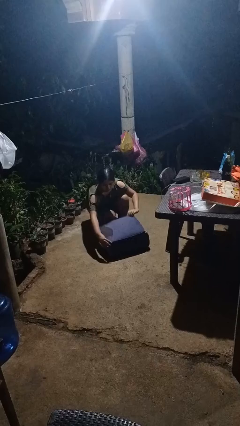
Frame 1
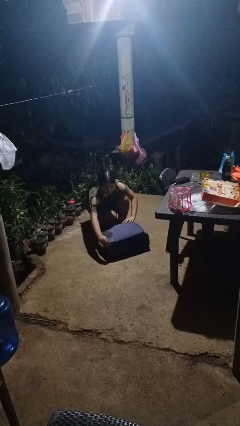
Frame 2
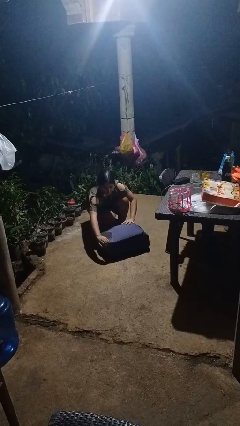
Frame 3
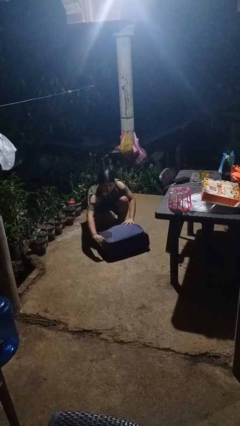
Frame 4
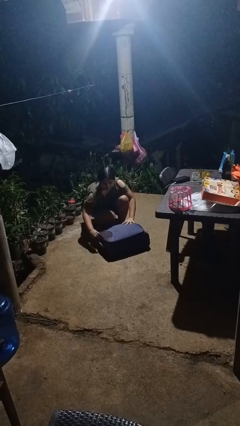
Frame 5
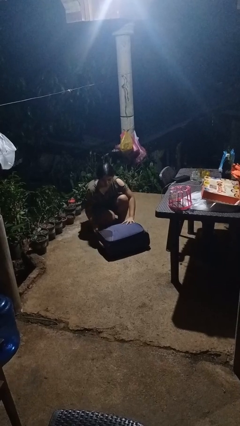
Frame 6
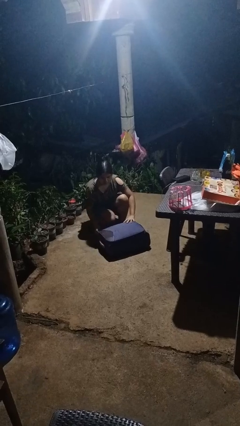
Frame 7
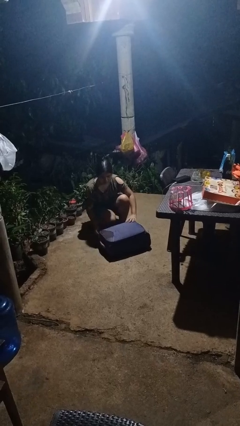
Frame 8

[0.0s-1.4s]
person closes suitcase

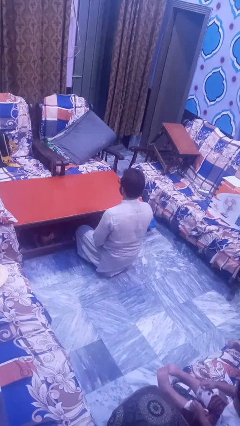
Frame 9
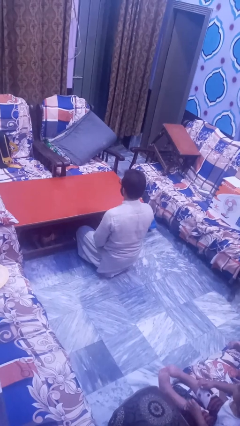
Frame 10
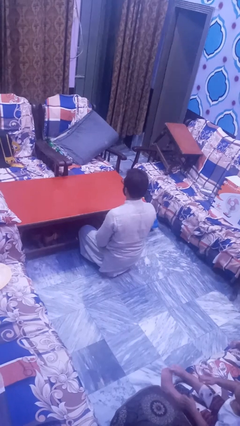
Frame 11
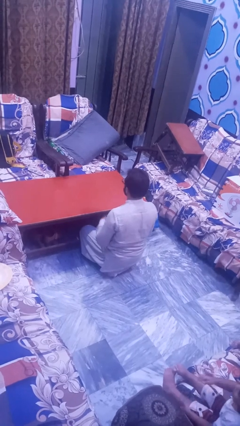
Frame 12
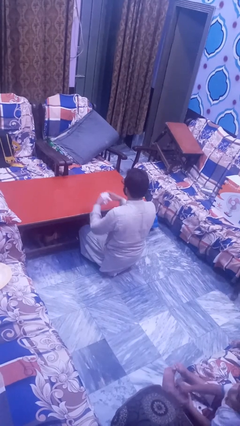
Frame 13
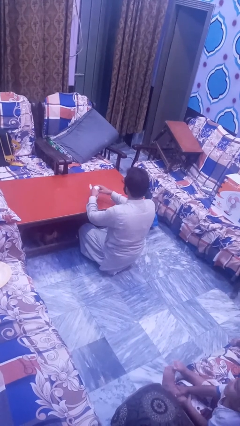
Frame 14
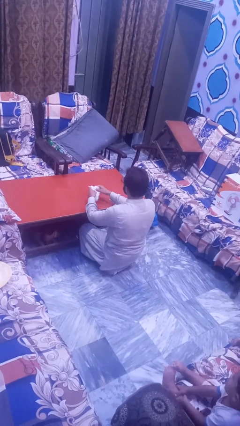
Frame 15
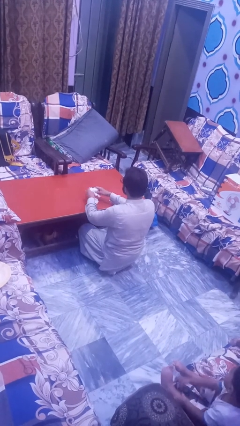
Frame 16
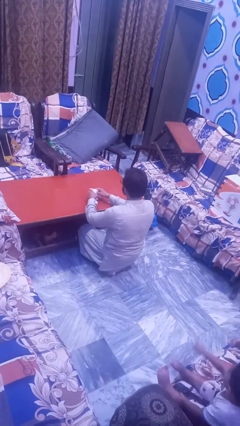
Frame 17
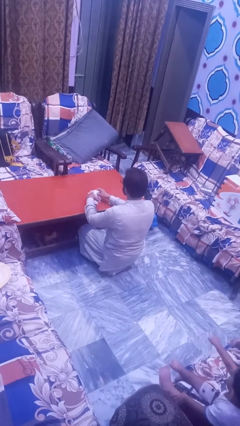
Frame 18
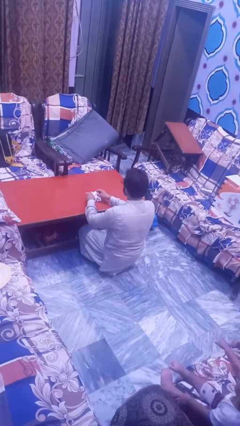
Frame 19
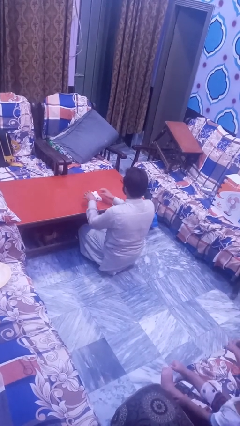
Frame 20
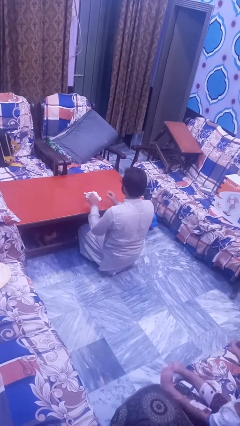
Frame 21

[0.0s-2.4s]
person tears paper

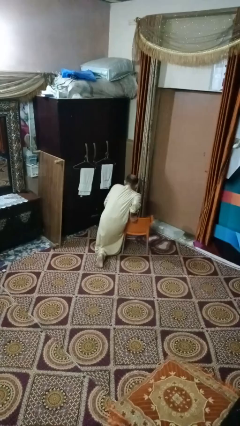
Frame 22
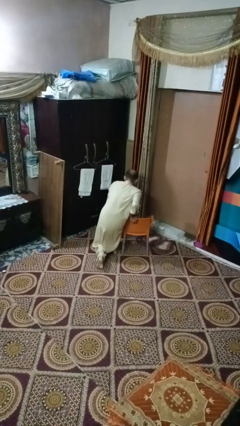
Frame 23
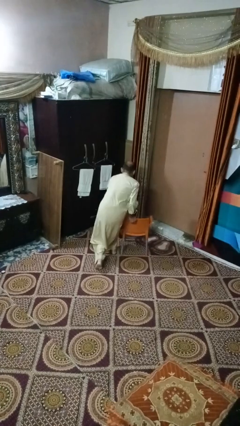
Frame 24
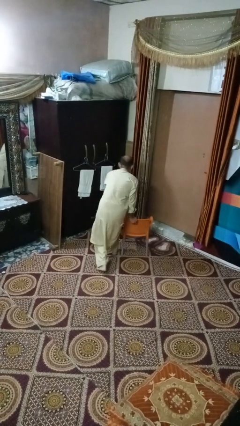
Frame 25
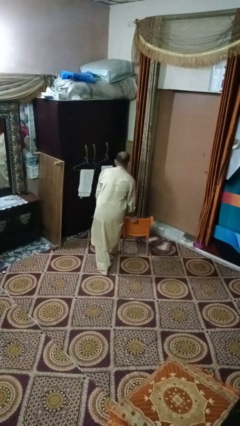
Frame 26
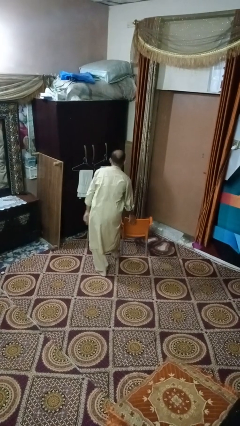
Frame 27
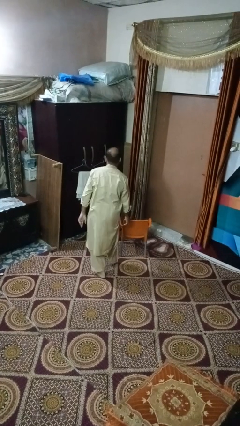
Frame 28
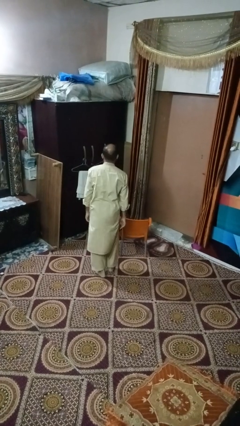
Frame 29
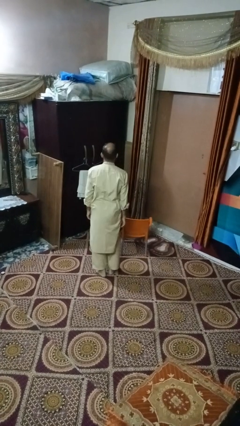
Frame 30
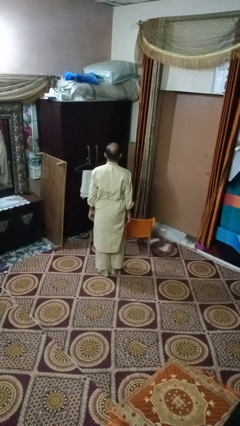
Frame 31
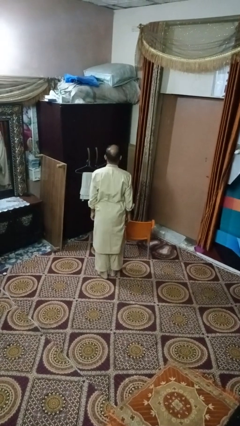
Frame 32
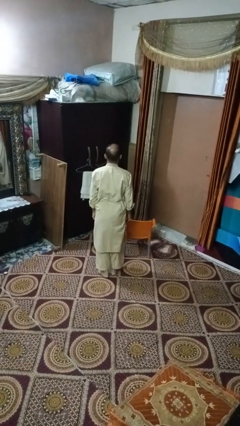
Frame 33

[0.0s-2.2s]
person stands up from floor

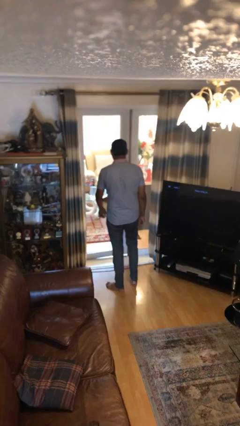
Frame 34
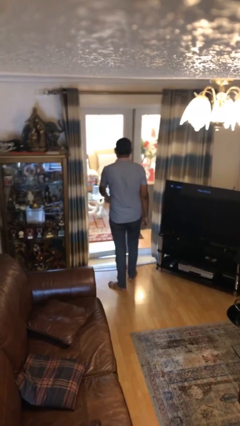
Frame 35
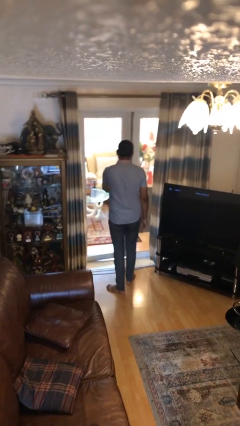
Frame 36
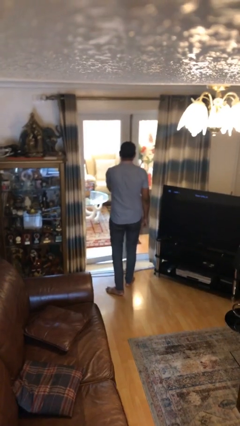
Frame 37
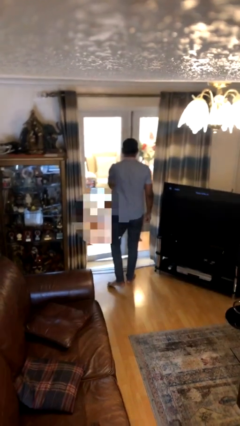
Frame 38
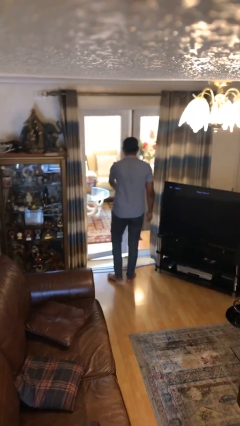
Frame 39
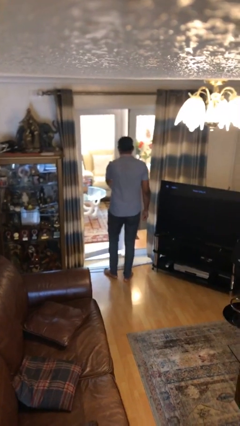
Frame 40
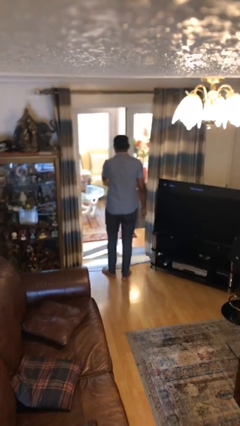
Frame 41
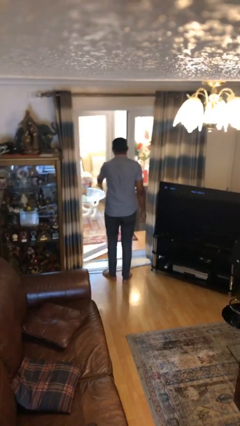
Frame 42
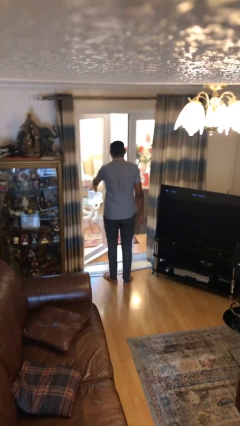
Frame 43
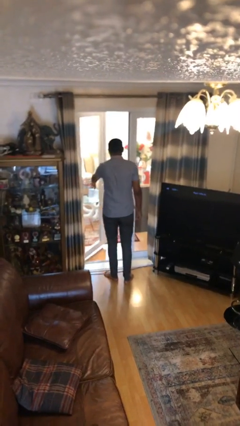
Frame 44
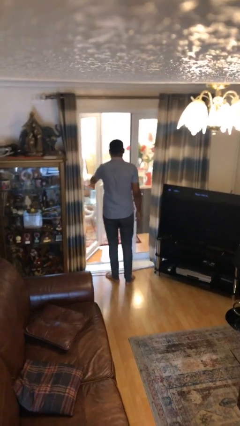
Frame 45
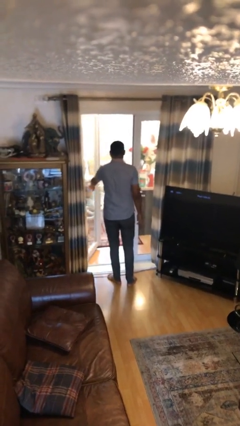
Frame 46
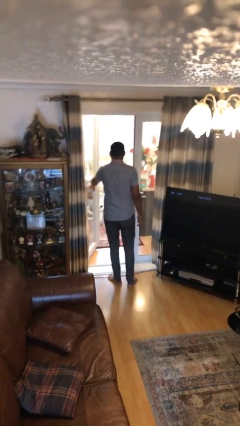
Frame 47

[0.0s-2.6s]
person opens facility door

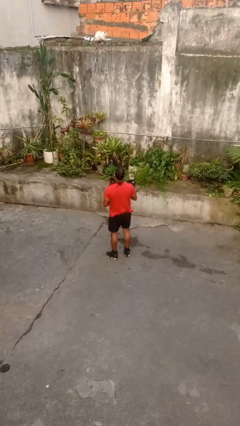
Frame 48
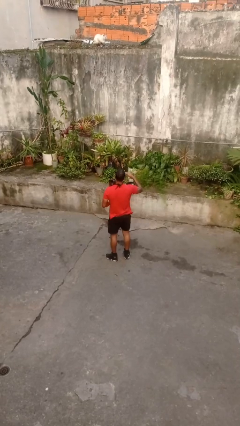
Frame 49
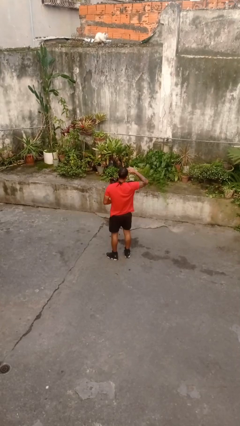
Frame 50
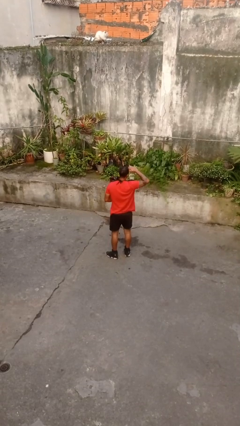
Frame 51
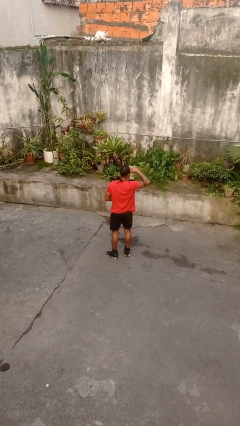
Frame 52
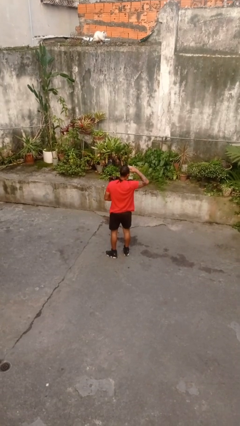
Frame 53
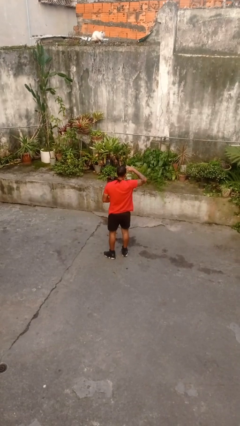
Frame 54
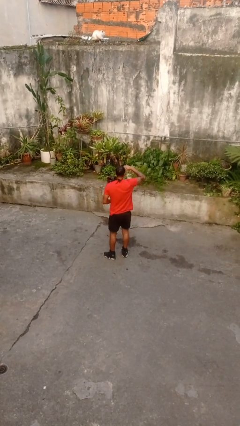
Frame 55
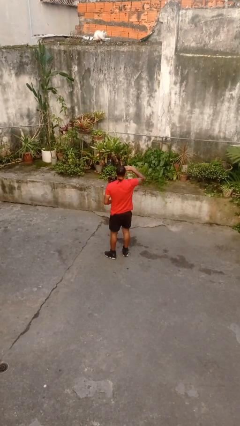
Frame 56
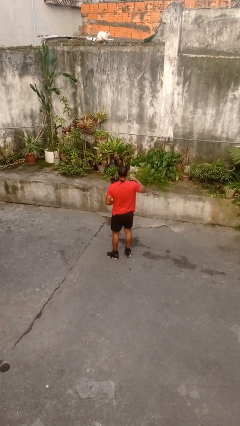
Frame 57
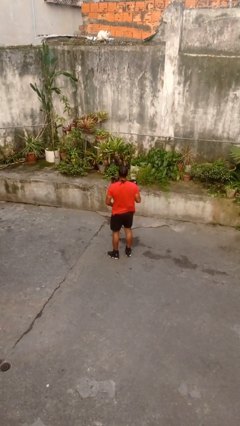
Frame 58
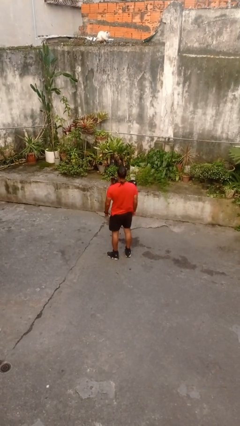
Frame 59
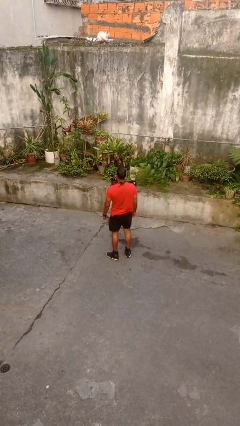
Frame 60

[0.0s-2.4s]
person shades eyes

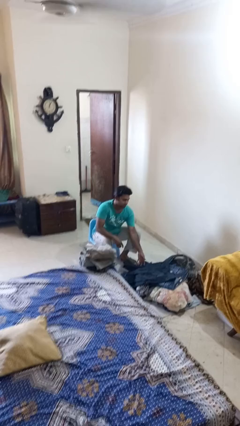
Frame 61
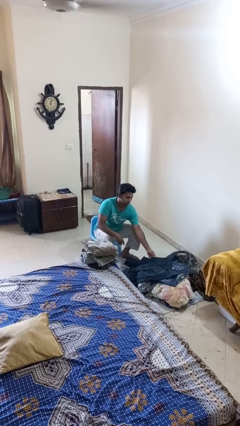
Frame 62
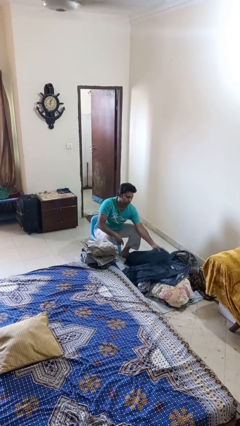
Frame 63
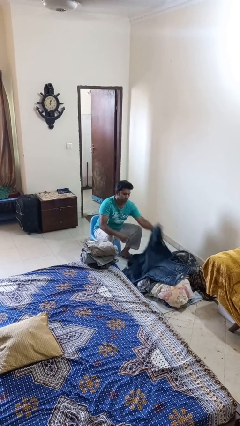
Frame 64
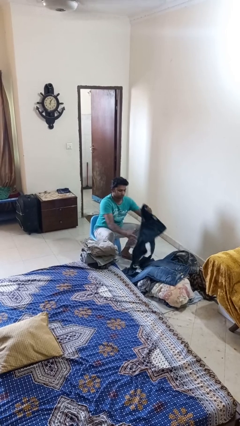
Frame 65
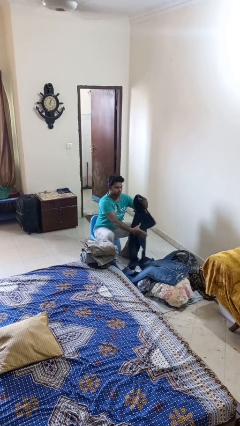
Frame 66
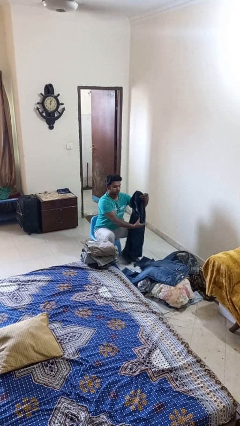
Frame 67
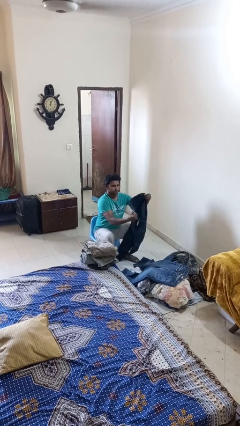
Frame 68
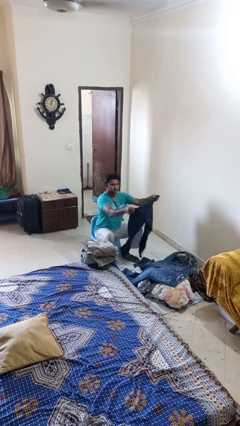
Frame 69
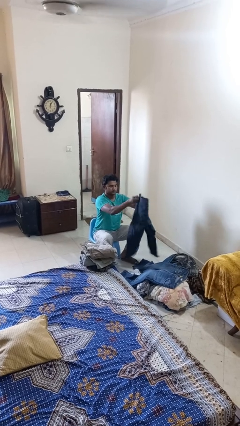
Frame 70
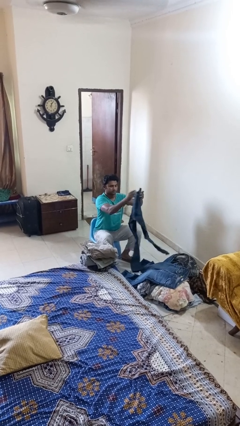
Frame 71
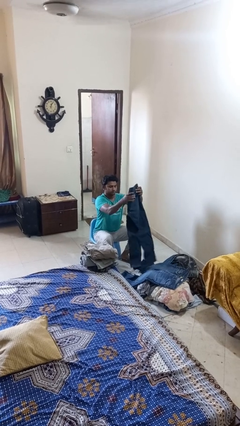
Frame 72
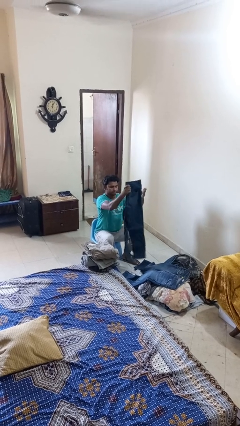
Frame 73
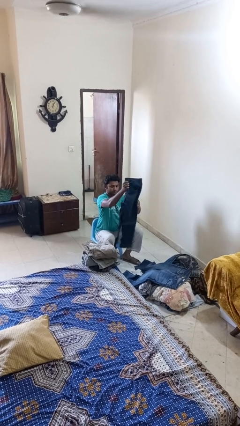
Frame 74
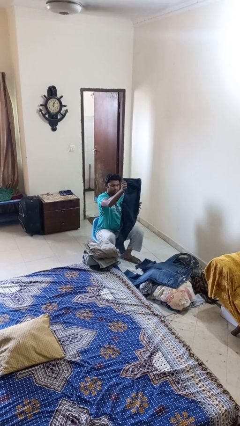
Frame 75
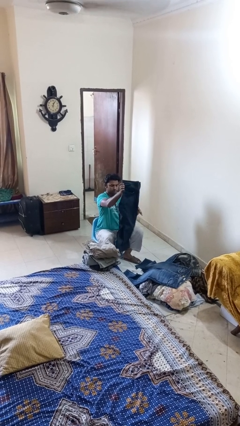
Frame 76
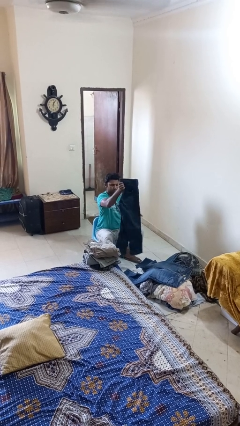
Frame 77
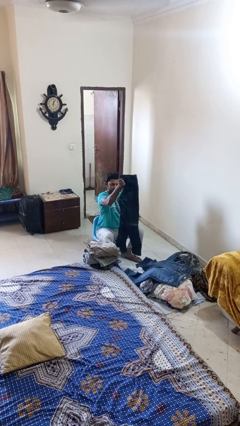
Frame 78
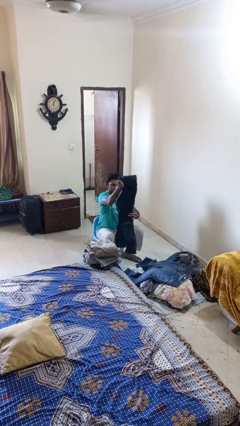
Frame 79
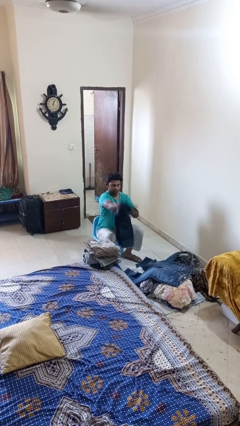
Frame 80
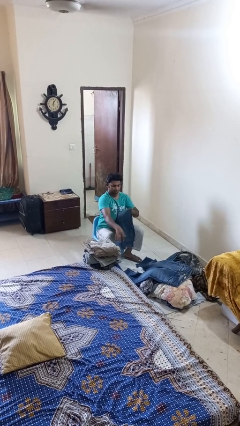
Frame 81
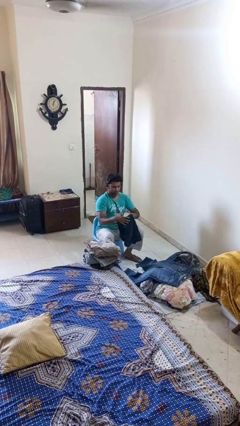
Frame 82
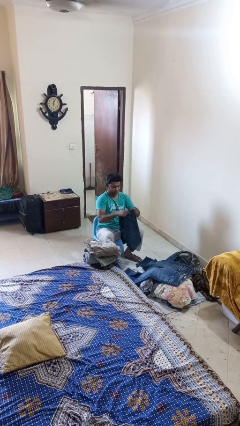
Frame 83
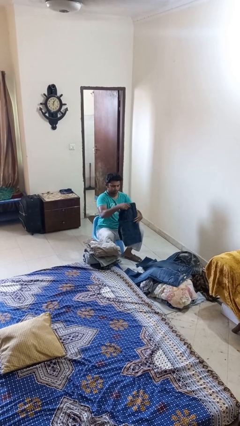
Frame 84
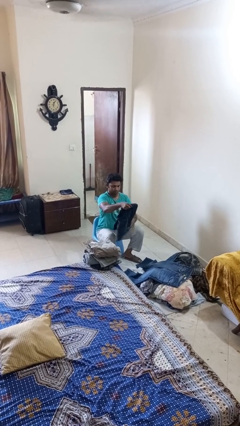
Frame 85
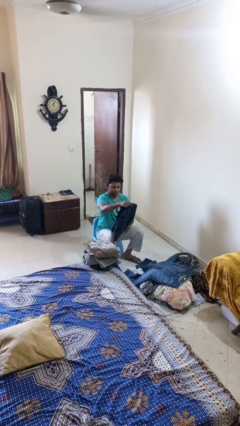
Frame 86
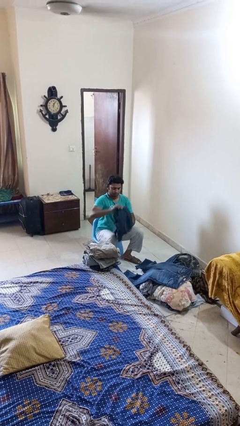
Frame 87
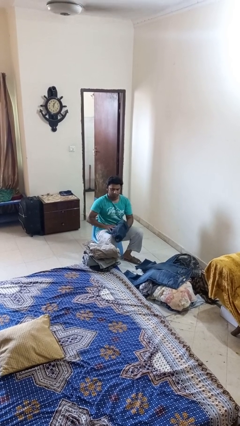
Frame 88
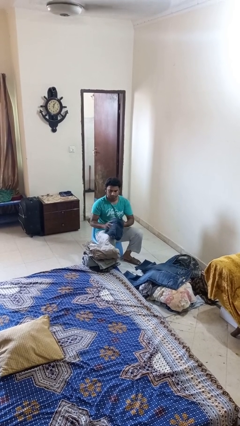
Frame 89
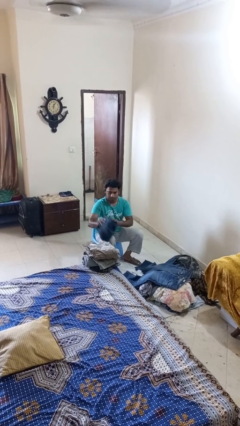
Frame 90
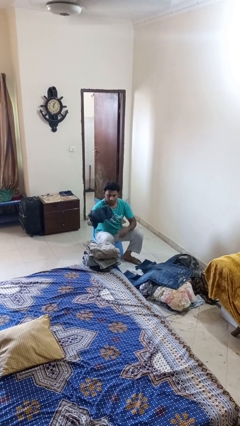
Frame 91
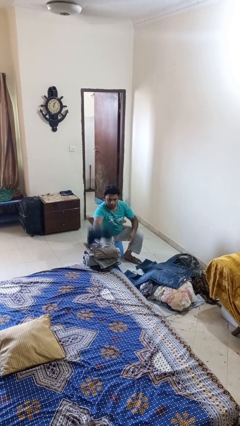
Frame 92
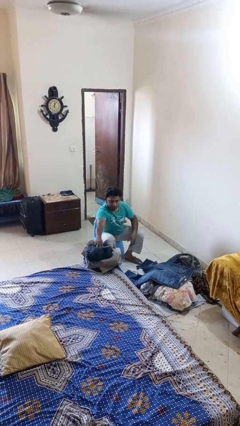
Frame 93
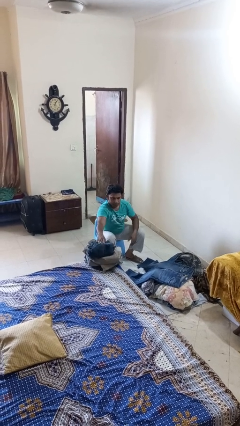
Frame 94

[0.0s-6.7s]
person folds pants
